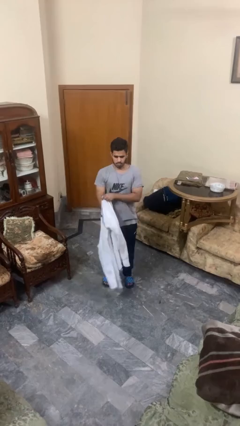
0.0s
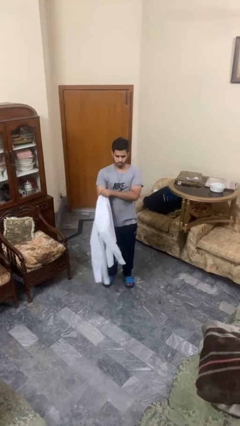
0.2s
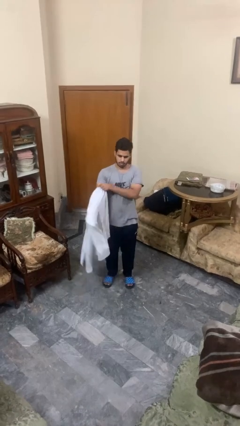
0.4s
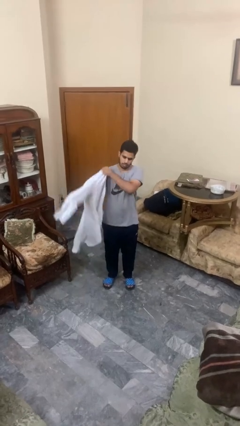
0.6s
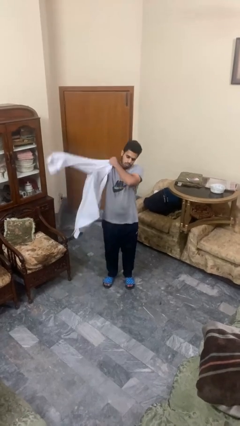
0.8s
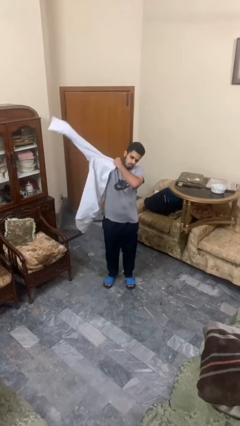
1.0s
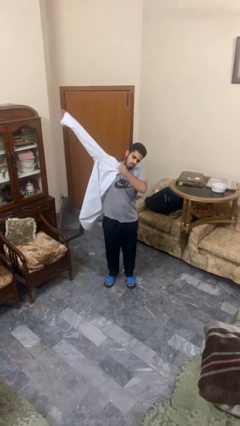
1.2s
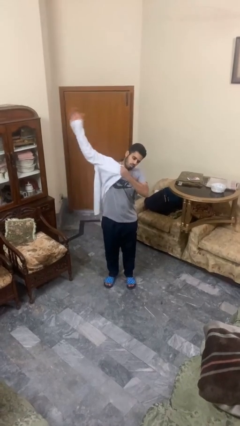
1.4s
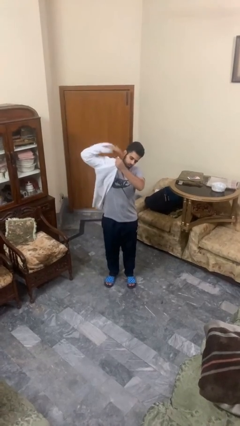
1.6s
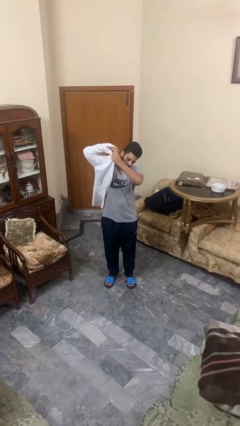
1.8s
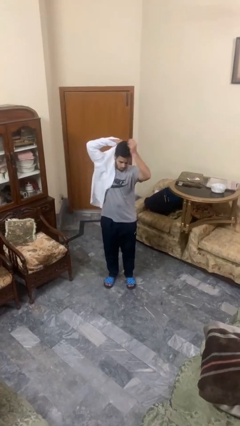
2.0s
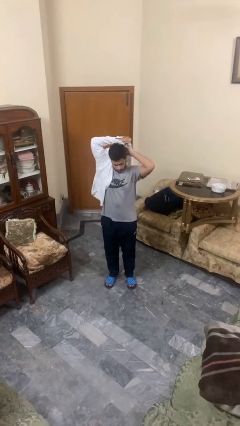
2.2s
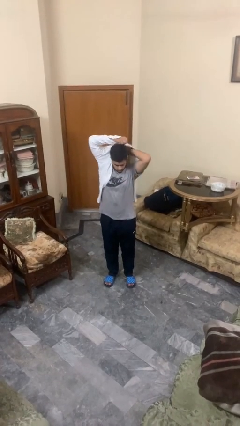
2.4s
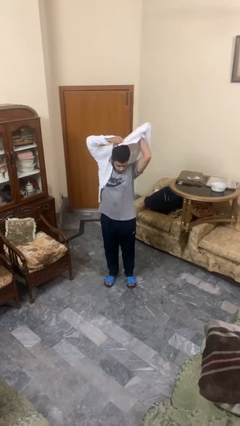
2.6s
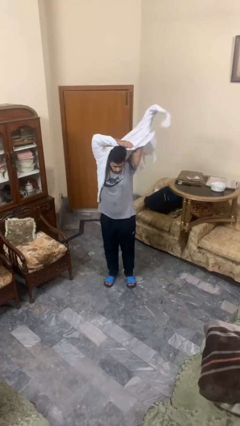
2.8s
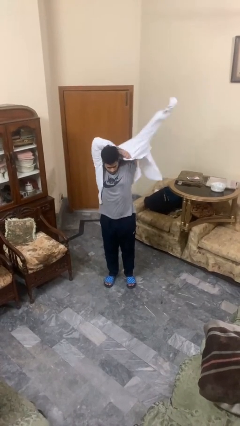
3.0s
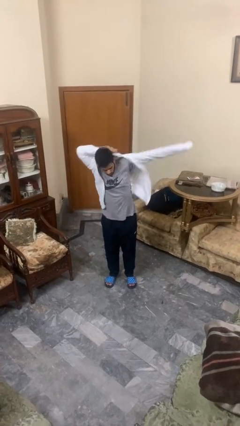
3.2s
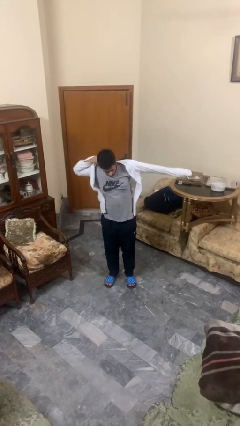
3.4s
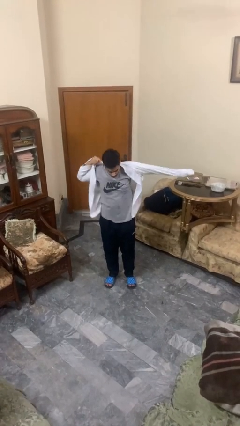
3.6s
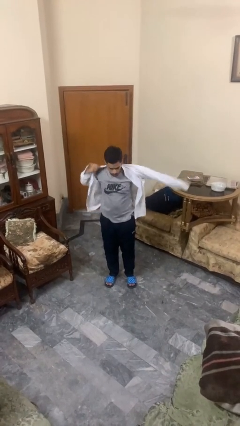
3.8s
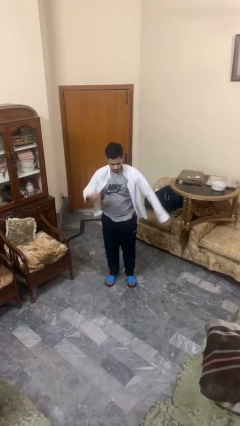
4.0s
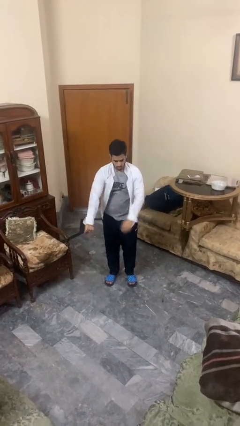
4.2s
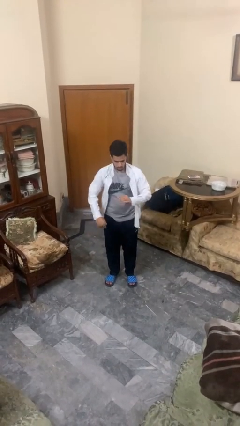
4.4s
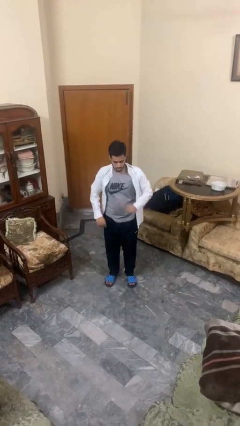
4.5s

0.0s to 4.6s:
person puts on shirt

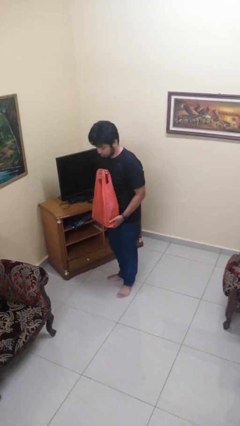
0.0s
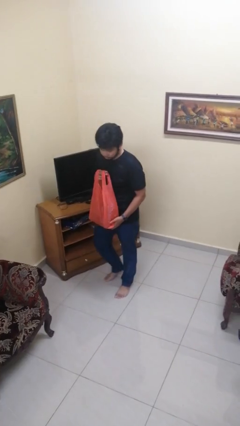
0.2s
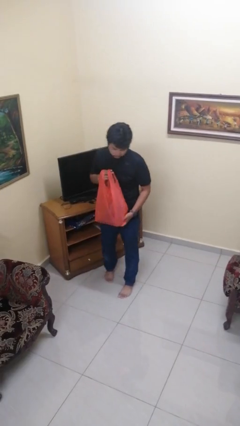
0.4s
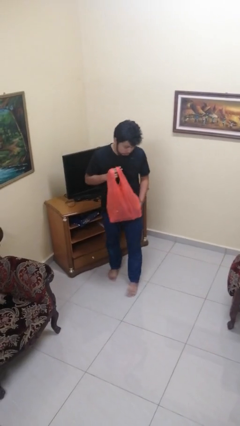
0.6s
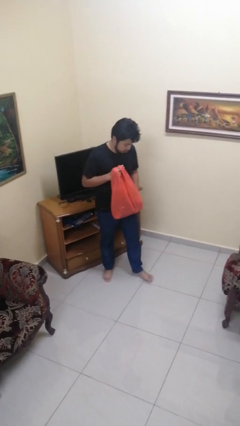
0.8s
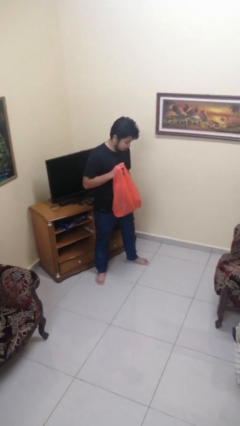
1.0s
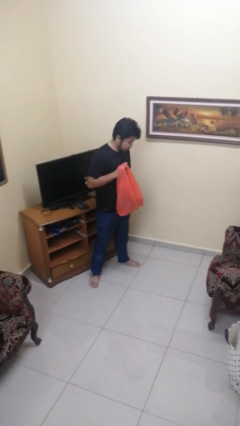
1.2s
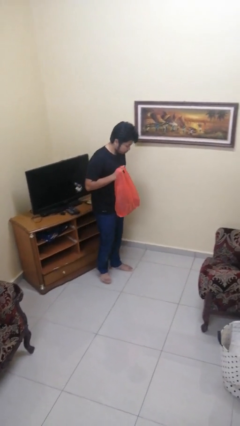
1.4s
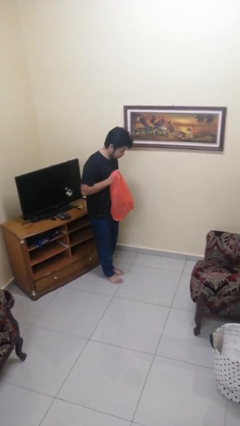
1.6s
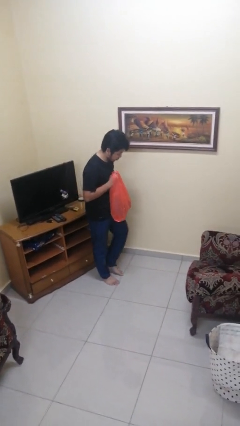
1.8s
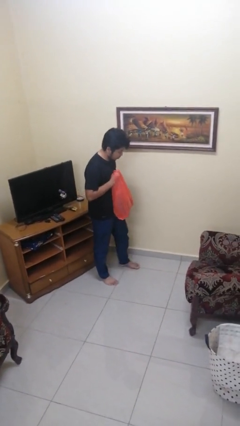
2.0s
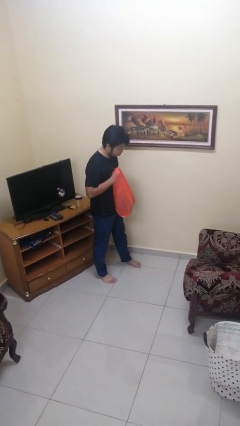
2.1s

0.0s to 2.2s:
person carries groceries

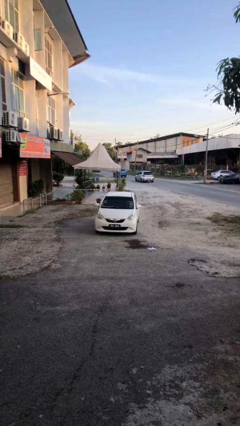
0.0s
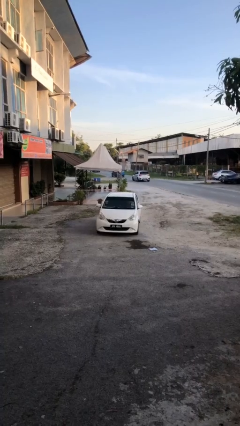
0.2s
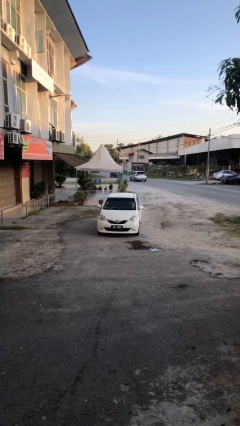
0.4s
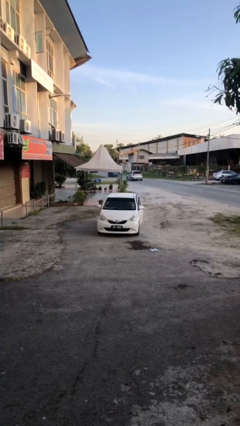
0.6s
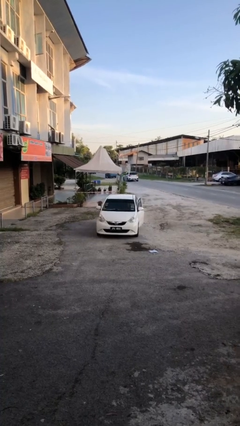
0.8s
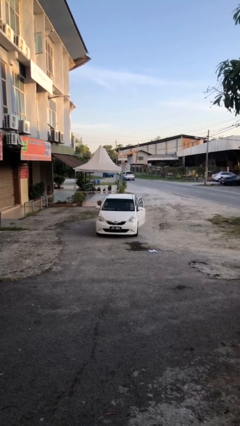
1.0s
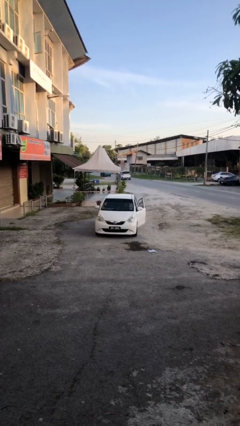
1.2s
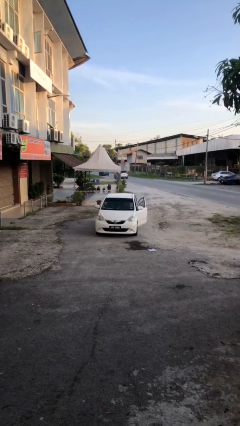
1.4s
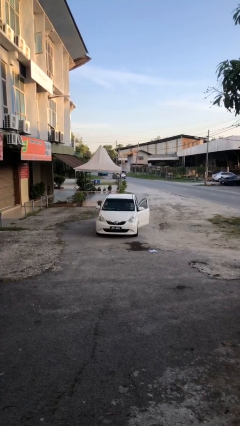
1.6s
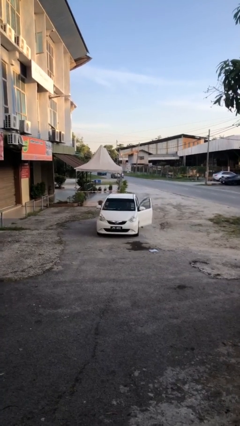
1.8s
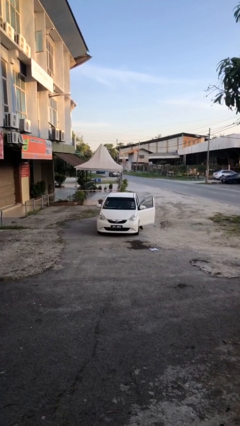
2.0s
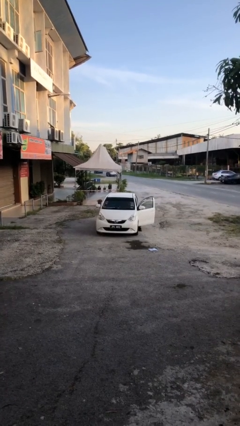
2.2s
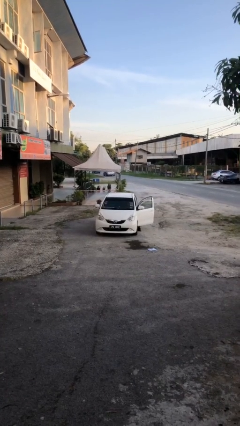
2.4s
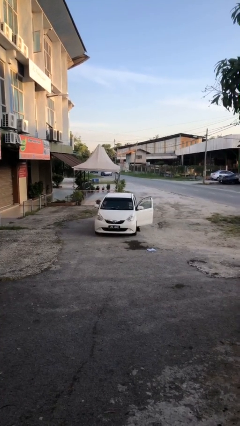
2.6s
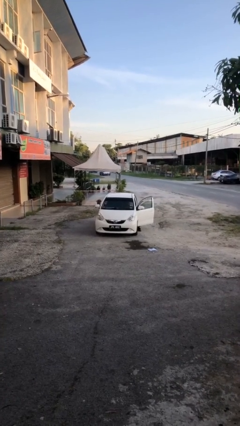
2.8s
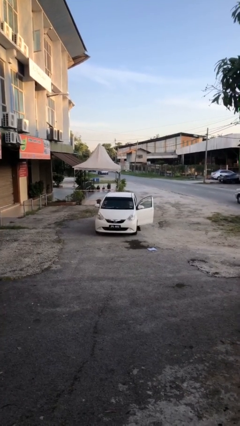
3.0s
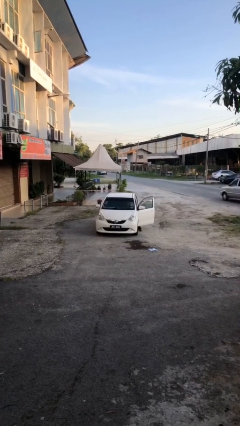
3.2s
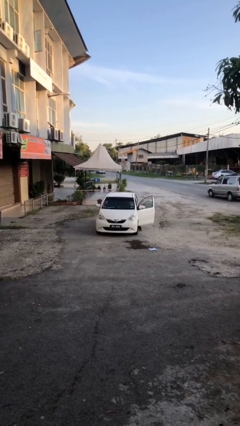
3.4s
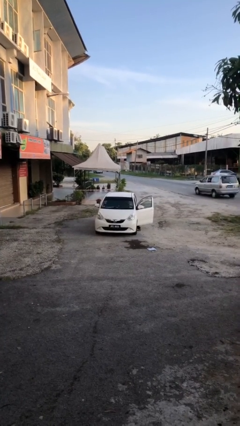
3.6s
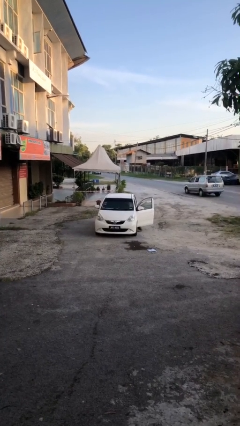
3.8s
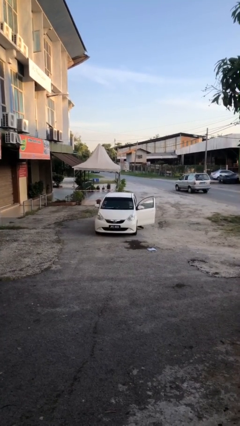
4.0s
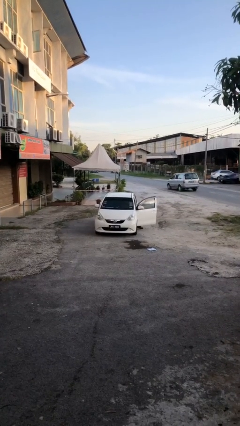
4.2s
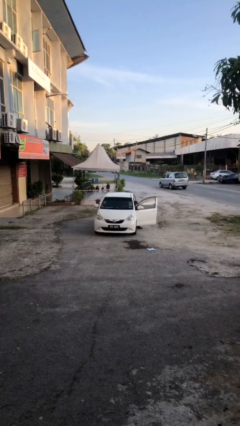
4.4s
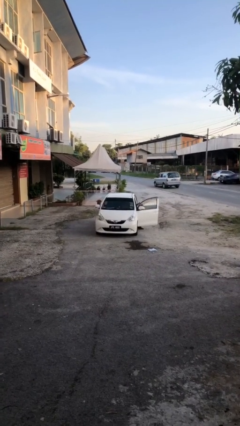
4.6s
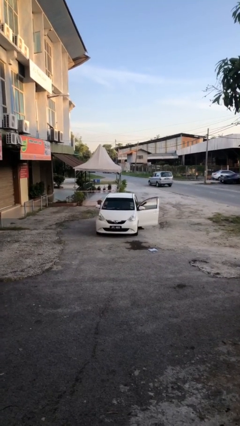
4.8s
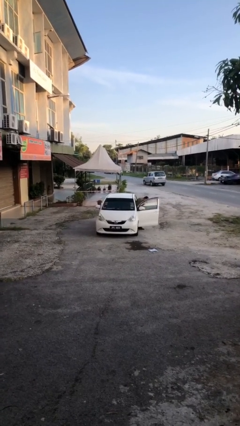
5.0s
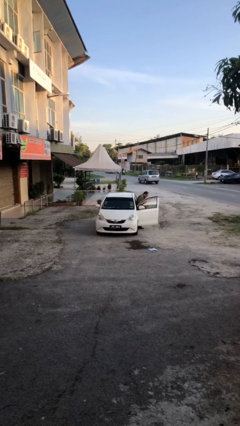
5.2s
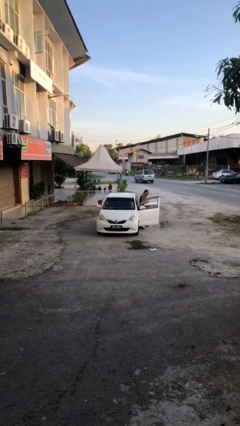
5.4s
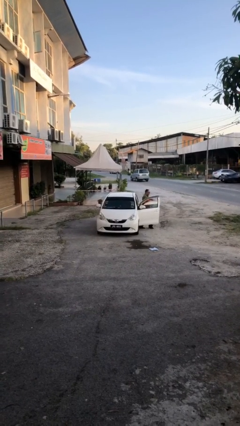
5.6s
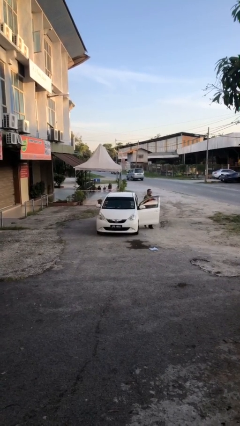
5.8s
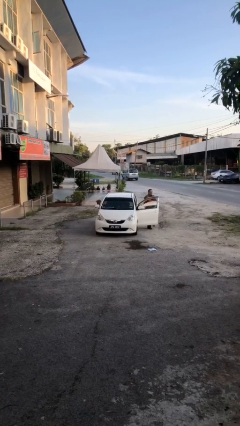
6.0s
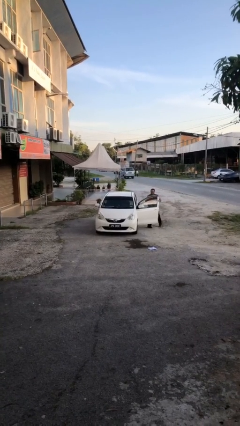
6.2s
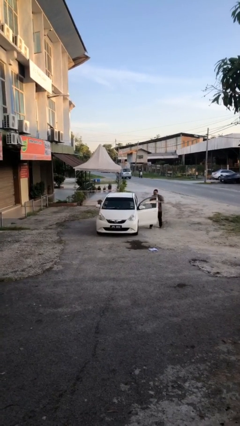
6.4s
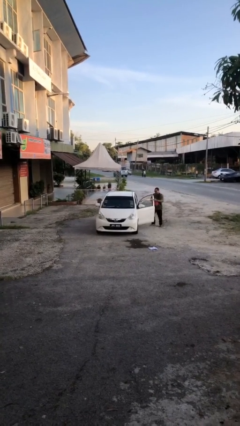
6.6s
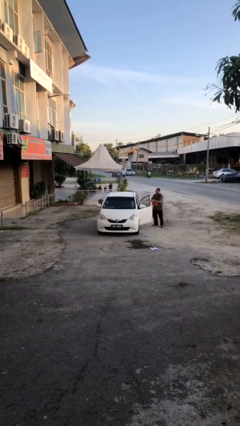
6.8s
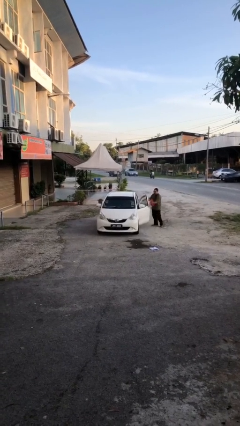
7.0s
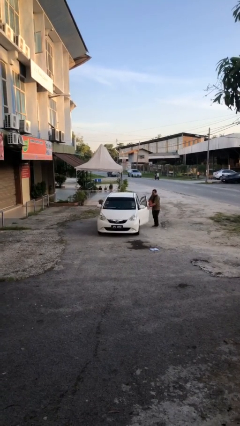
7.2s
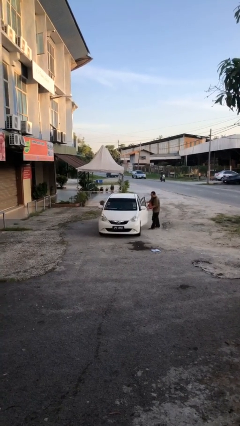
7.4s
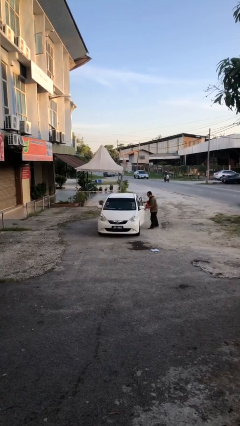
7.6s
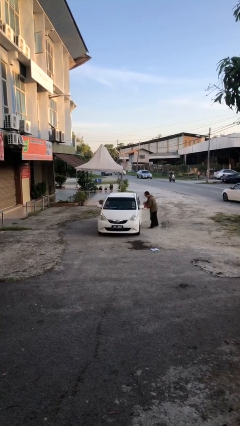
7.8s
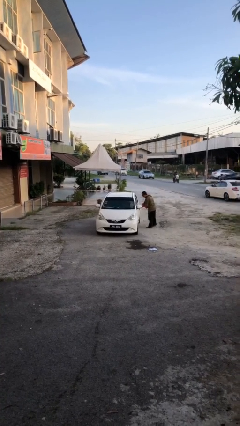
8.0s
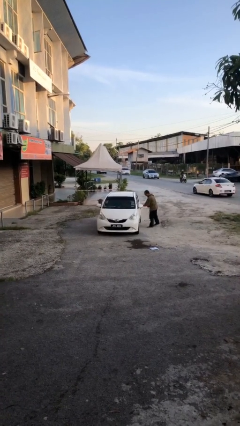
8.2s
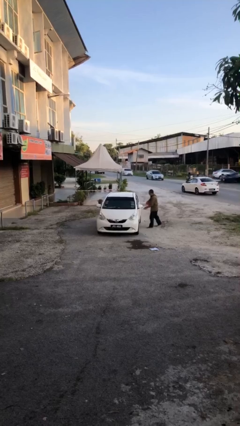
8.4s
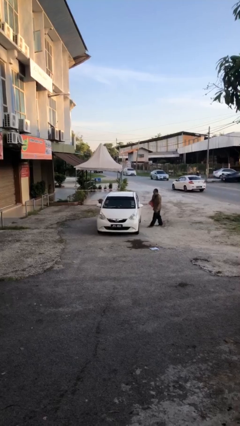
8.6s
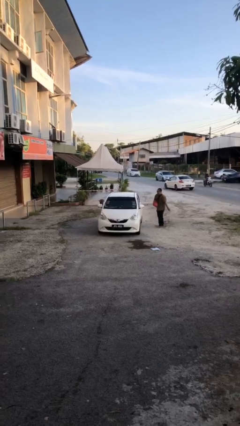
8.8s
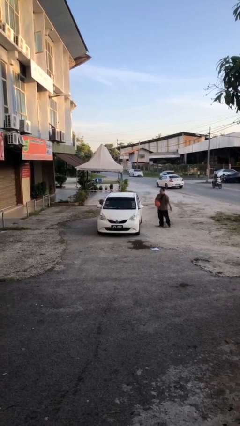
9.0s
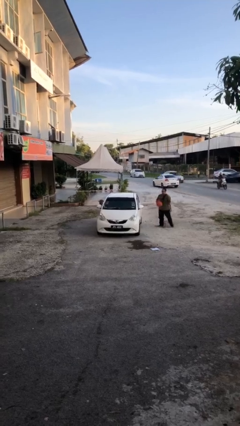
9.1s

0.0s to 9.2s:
car drops off person

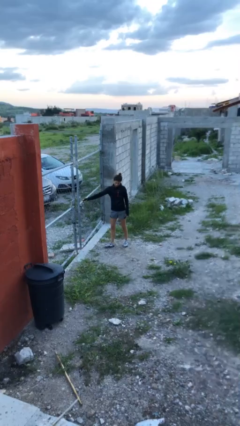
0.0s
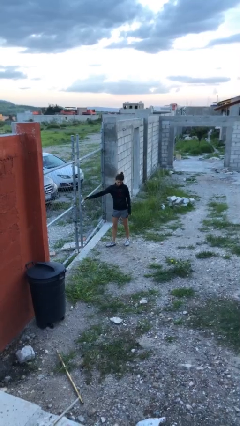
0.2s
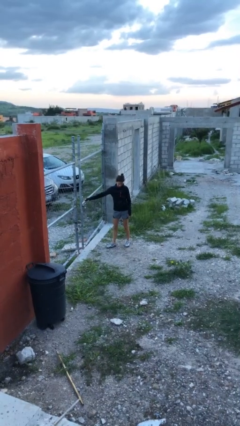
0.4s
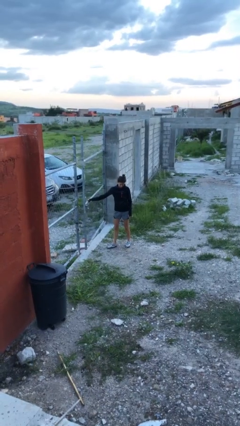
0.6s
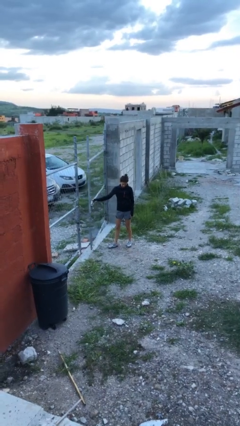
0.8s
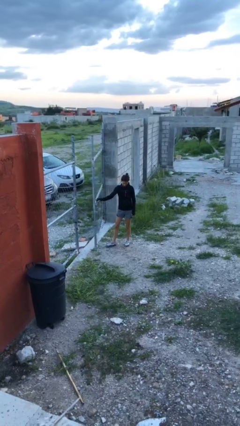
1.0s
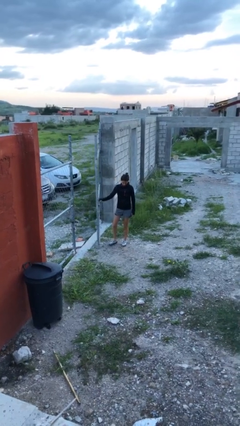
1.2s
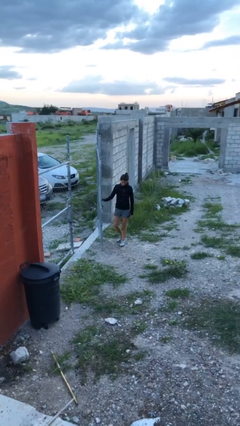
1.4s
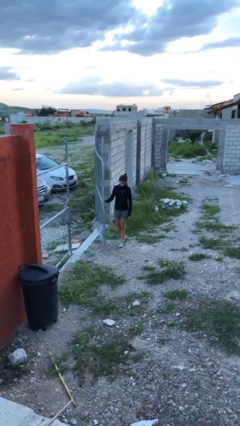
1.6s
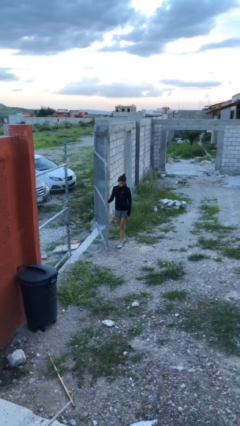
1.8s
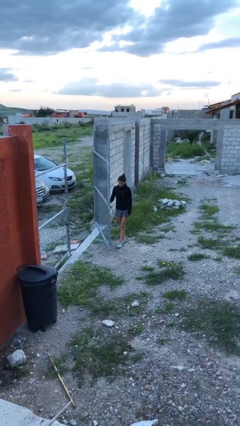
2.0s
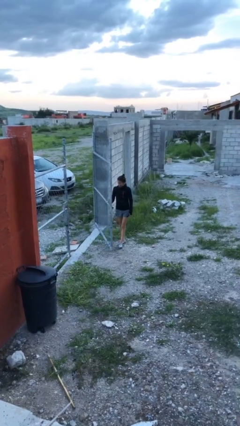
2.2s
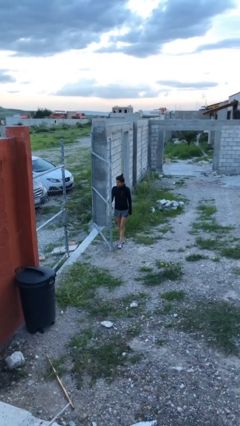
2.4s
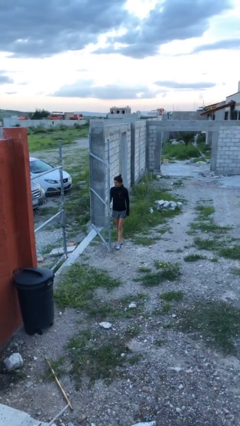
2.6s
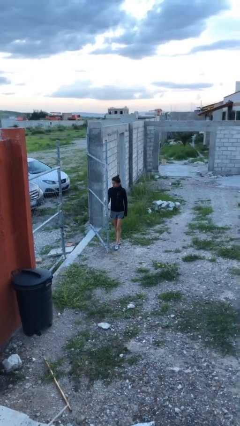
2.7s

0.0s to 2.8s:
person opens gate
